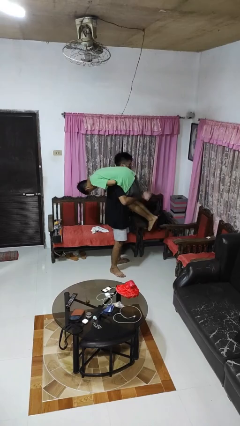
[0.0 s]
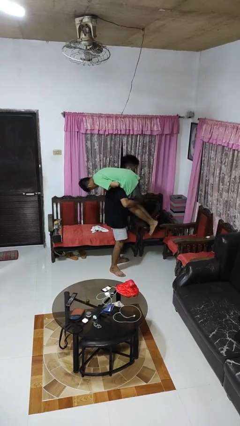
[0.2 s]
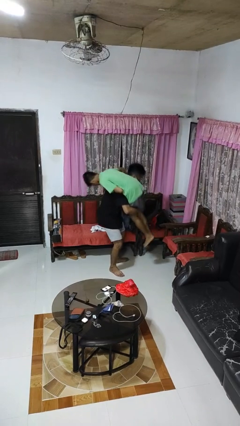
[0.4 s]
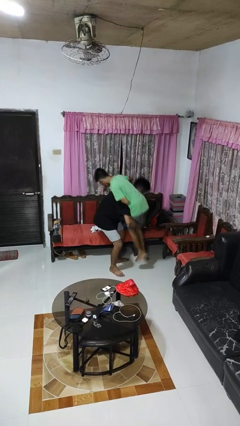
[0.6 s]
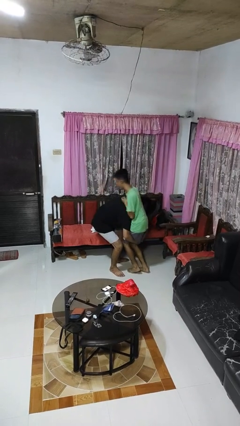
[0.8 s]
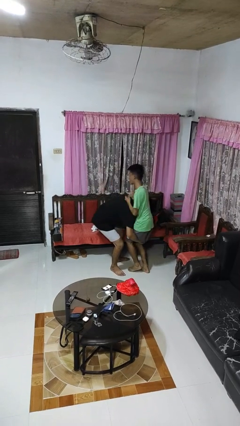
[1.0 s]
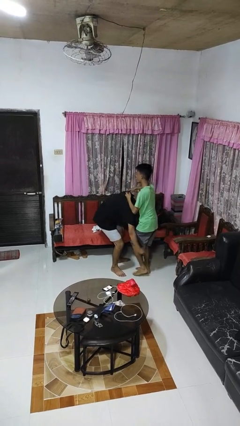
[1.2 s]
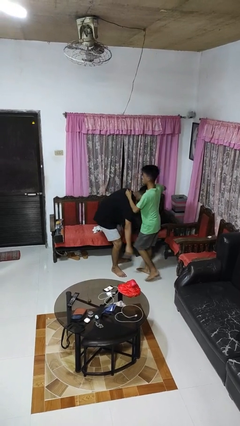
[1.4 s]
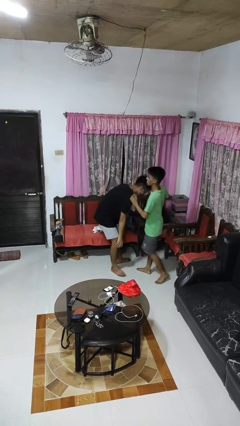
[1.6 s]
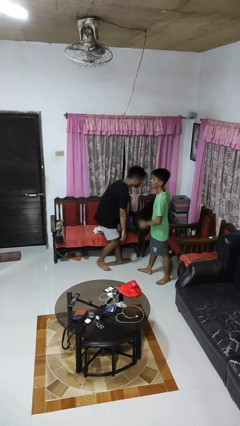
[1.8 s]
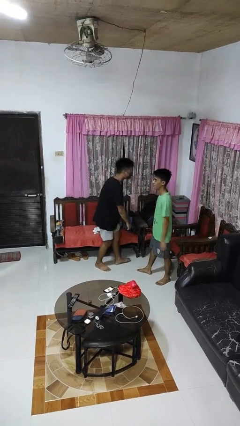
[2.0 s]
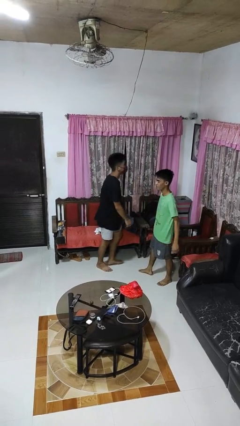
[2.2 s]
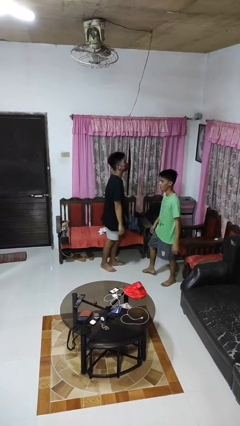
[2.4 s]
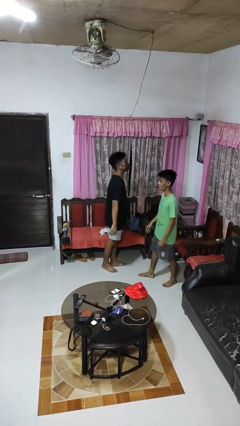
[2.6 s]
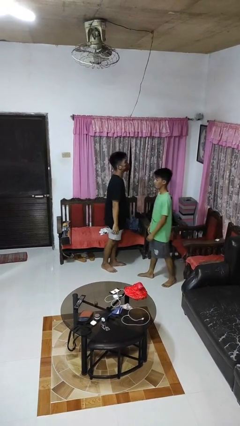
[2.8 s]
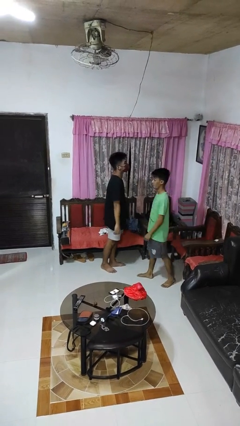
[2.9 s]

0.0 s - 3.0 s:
person puts down person

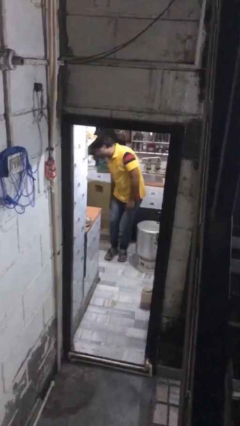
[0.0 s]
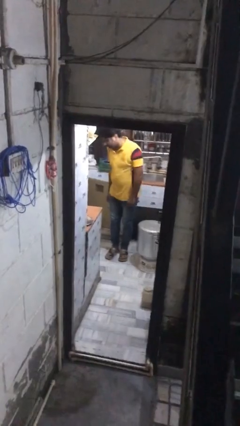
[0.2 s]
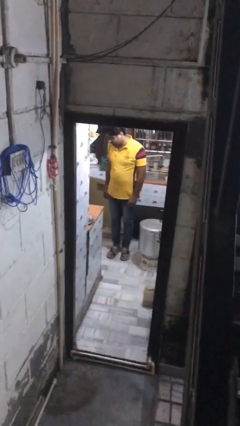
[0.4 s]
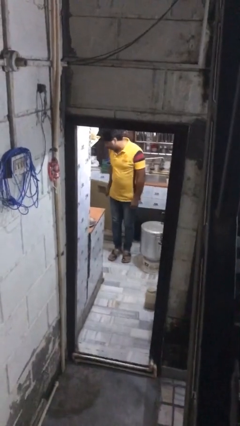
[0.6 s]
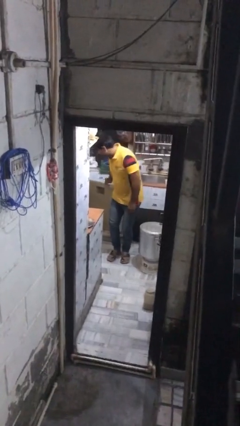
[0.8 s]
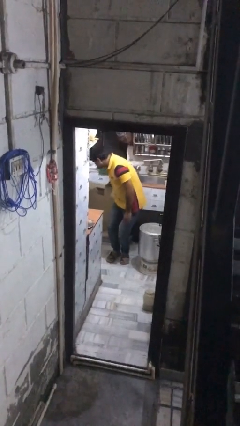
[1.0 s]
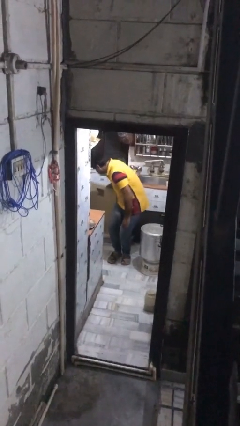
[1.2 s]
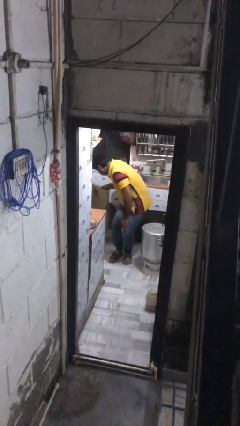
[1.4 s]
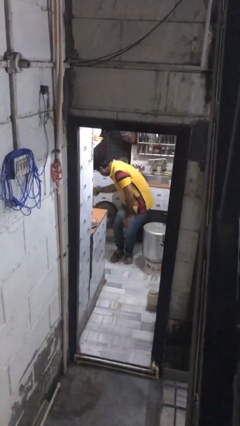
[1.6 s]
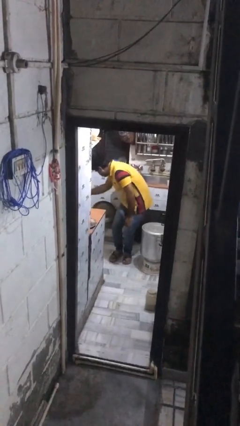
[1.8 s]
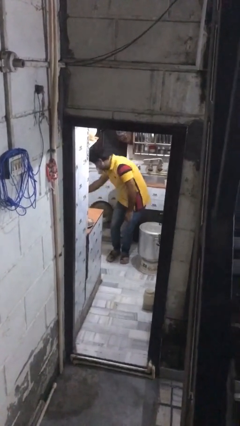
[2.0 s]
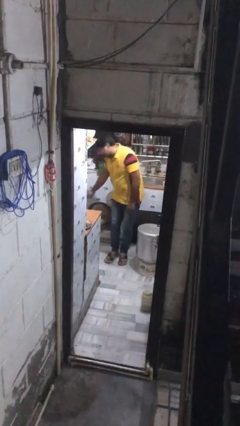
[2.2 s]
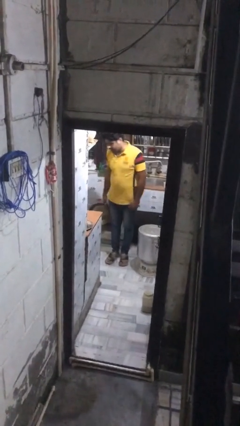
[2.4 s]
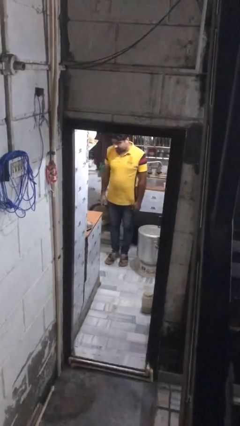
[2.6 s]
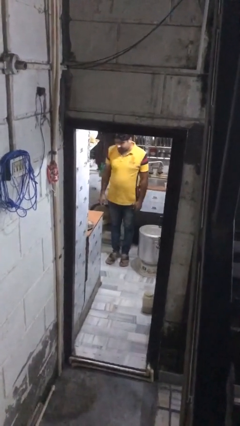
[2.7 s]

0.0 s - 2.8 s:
person closes kitchen drawer

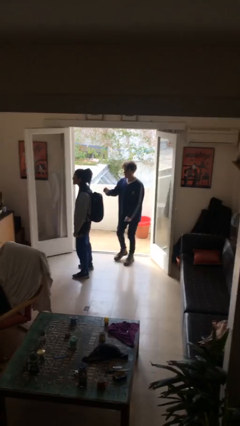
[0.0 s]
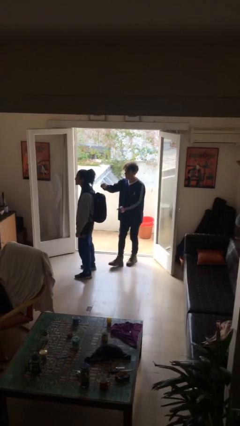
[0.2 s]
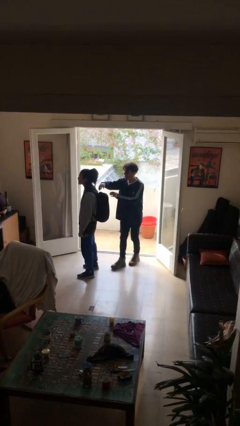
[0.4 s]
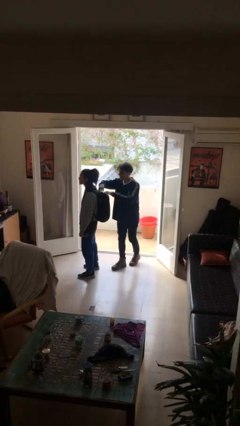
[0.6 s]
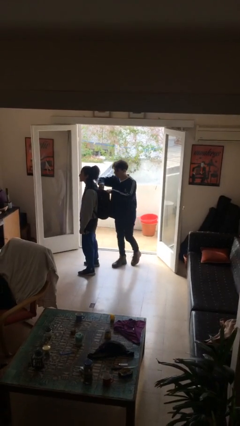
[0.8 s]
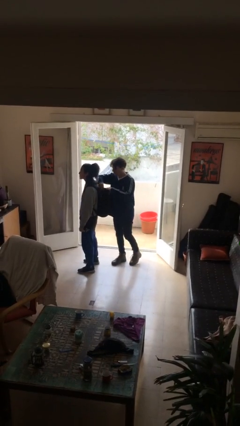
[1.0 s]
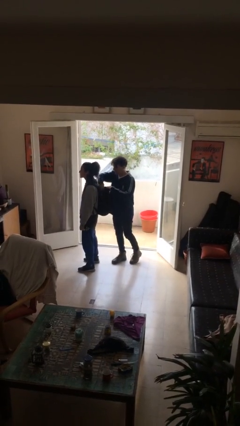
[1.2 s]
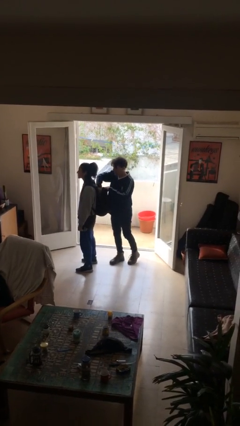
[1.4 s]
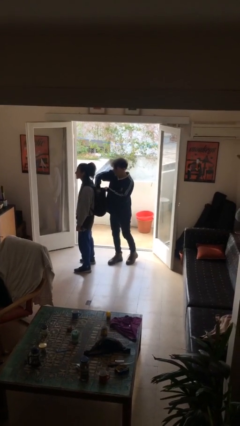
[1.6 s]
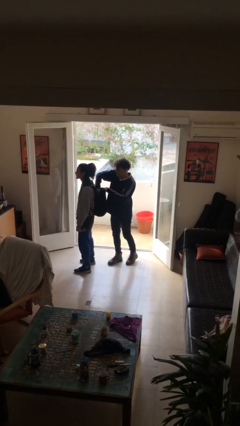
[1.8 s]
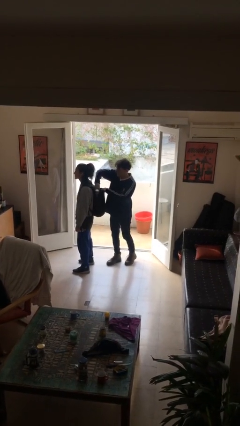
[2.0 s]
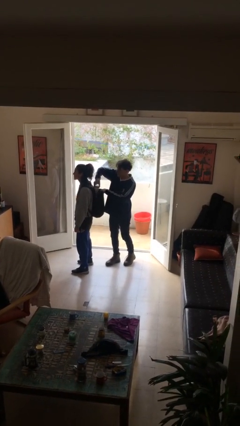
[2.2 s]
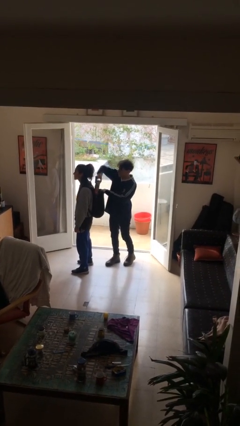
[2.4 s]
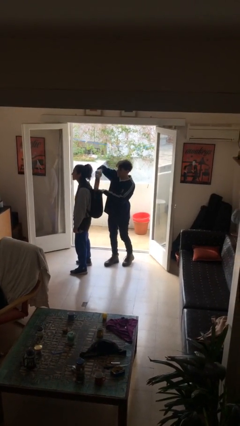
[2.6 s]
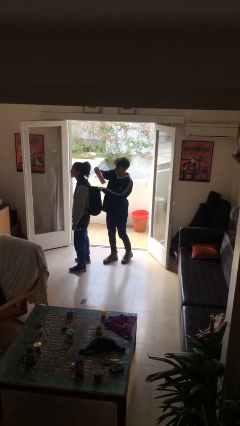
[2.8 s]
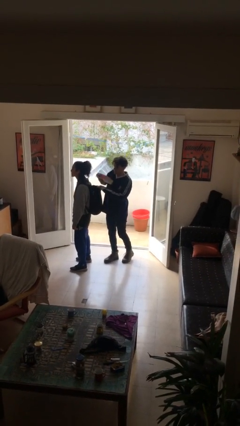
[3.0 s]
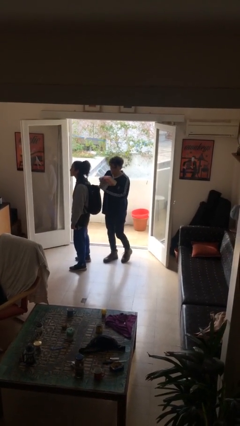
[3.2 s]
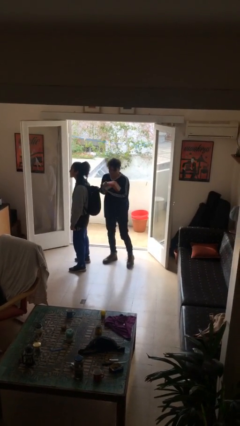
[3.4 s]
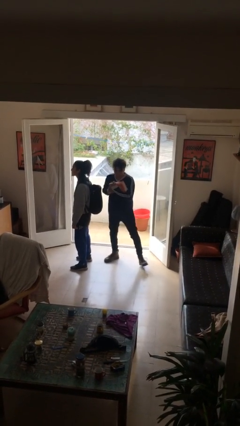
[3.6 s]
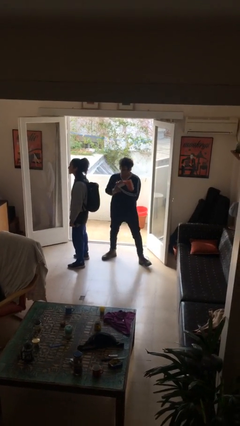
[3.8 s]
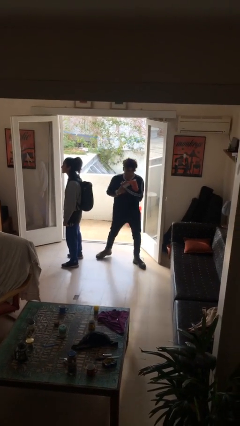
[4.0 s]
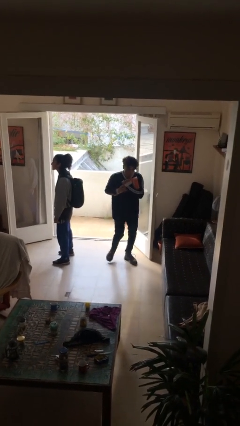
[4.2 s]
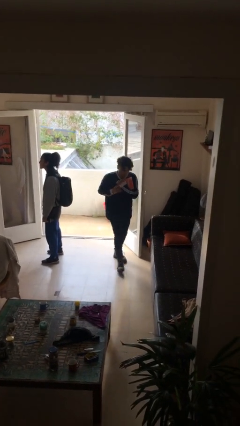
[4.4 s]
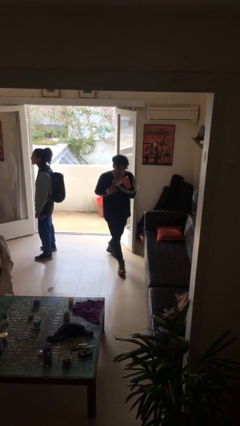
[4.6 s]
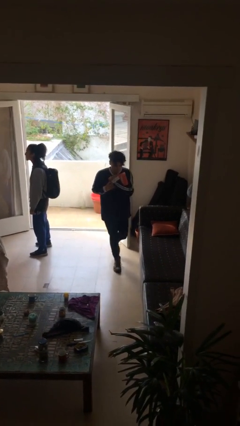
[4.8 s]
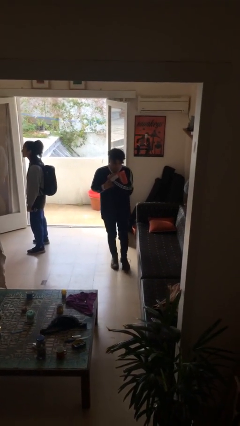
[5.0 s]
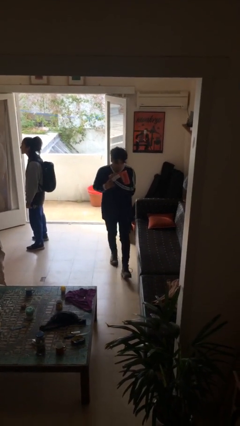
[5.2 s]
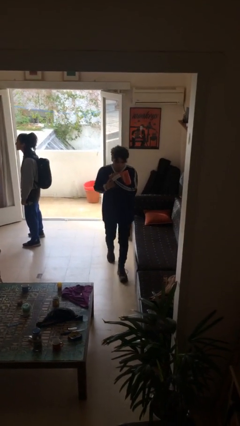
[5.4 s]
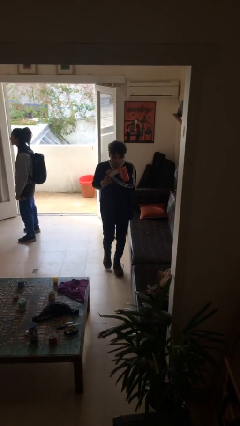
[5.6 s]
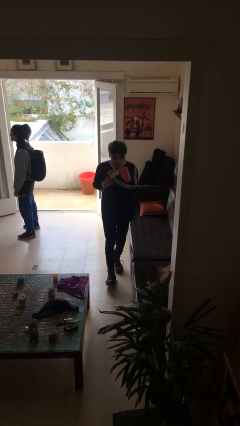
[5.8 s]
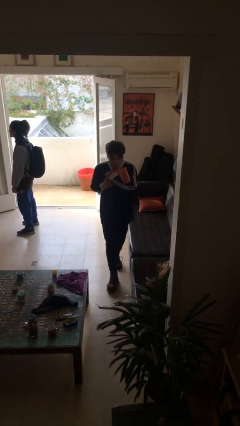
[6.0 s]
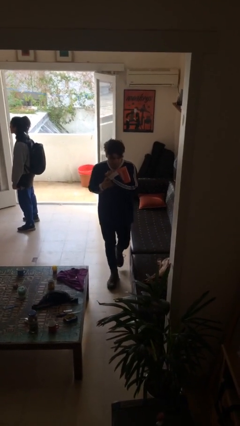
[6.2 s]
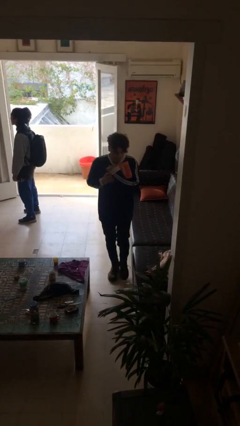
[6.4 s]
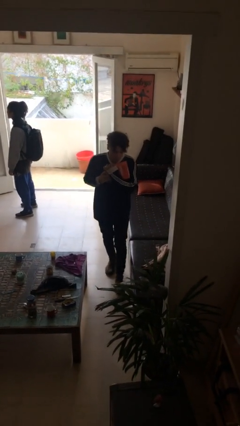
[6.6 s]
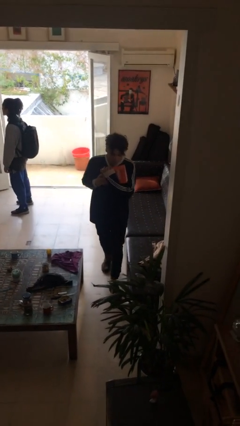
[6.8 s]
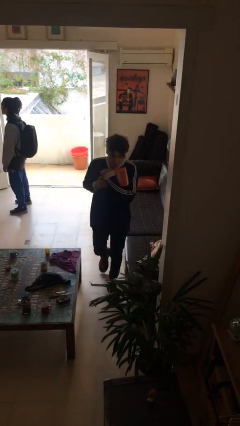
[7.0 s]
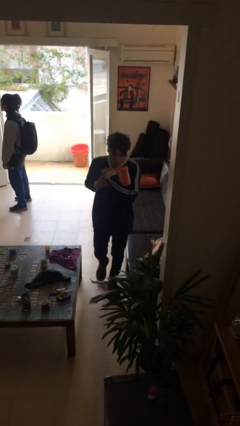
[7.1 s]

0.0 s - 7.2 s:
person steals object from person

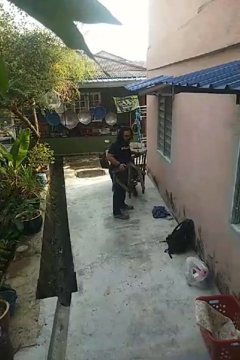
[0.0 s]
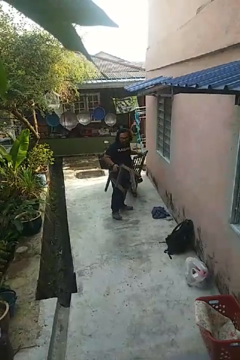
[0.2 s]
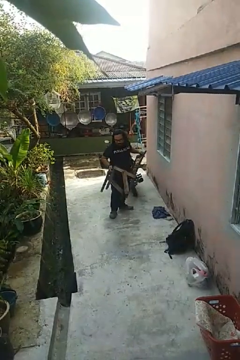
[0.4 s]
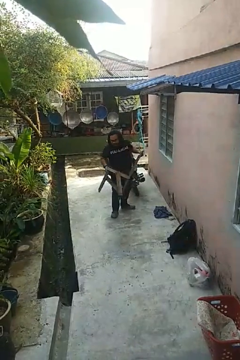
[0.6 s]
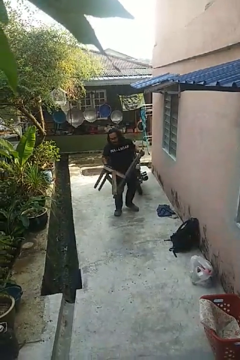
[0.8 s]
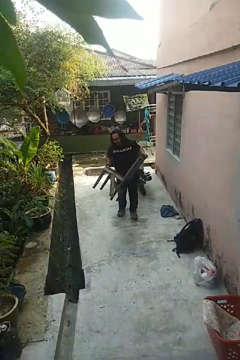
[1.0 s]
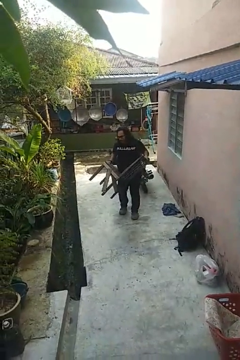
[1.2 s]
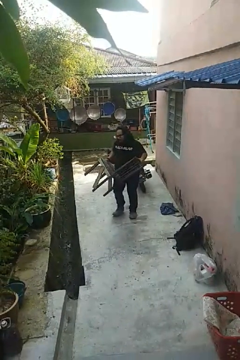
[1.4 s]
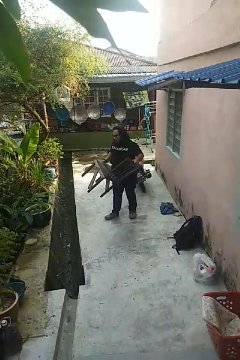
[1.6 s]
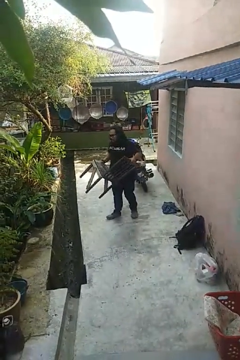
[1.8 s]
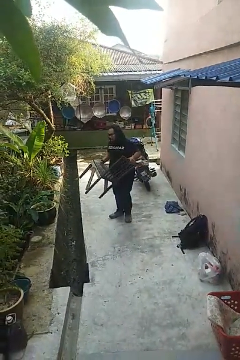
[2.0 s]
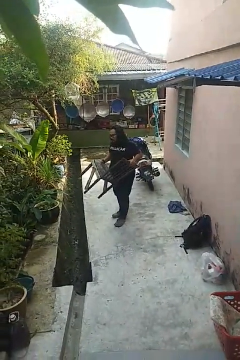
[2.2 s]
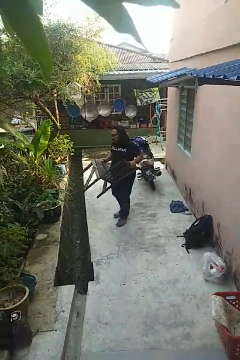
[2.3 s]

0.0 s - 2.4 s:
person carries furniture

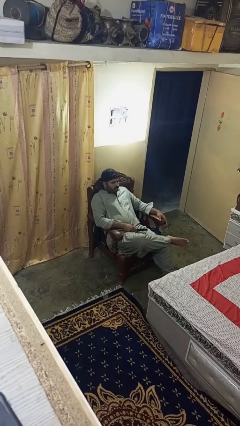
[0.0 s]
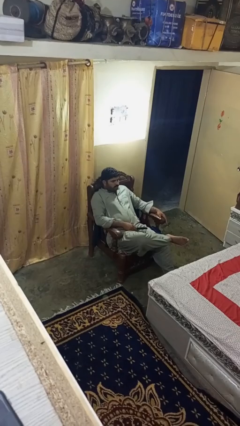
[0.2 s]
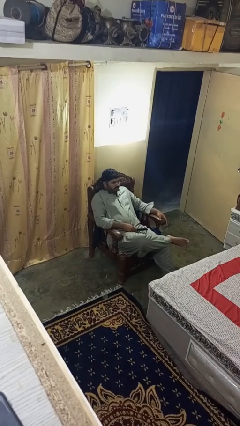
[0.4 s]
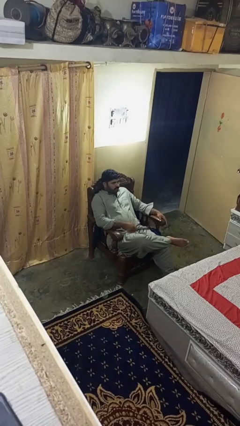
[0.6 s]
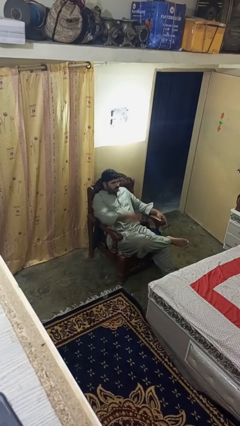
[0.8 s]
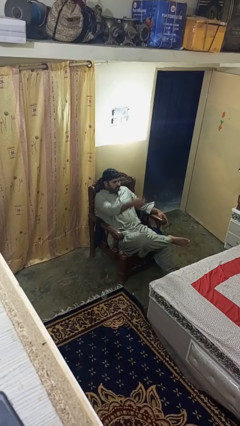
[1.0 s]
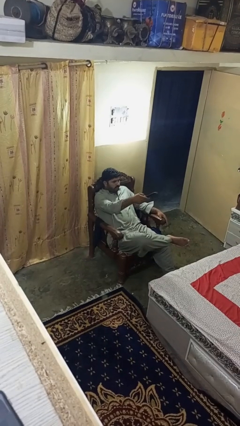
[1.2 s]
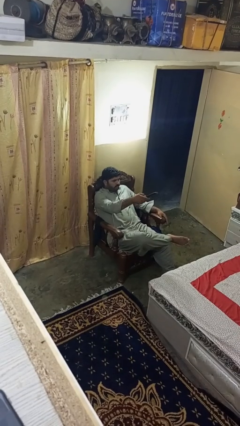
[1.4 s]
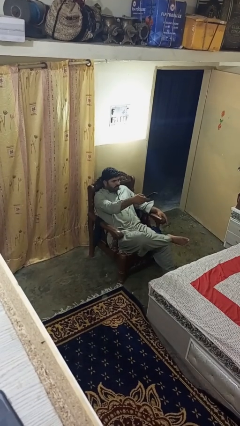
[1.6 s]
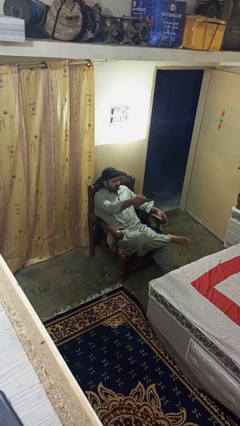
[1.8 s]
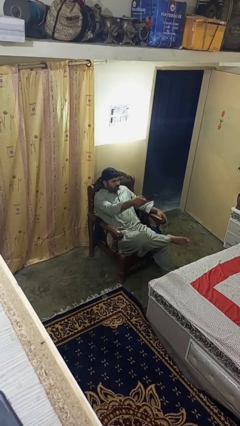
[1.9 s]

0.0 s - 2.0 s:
person uses television remote

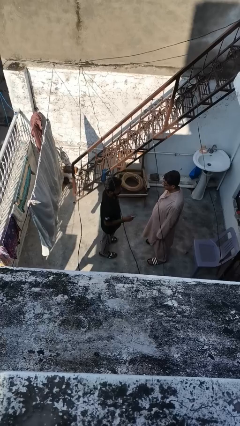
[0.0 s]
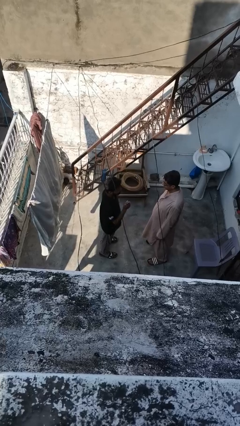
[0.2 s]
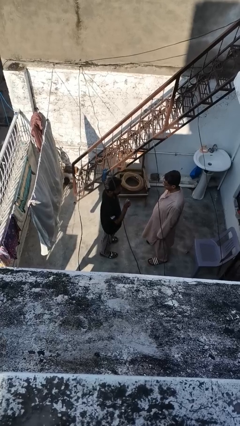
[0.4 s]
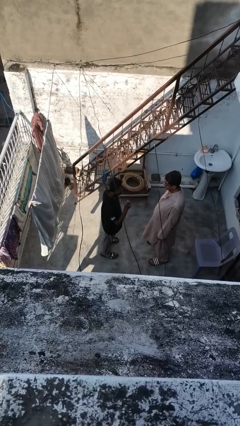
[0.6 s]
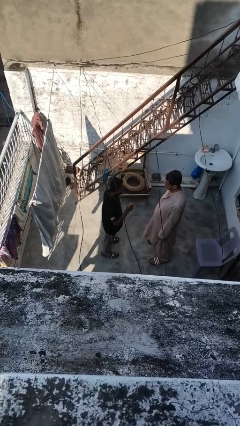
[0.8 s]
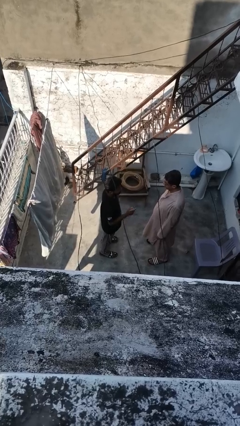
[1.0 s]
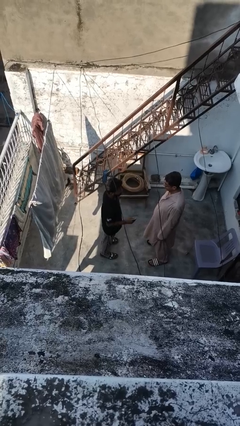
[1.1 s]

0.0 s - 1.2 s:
person points at person
